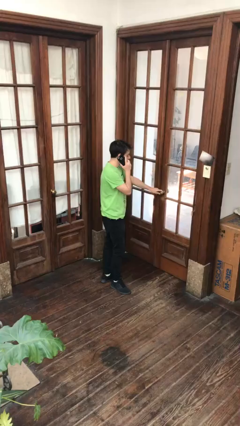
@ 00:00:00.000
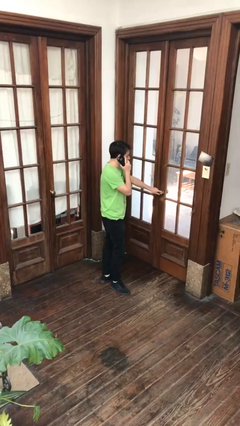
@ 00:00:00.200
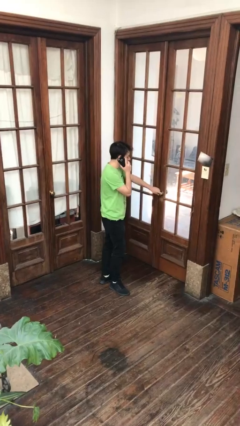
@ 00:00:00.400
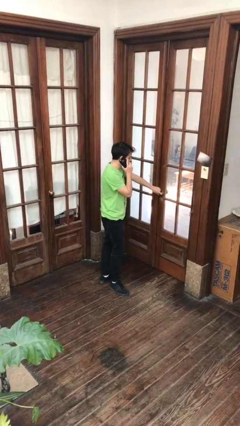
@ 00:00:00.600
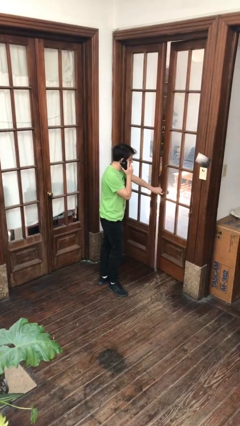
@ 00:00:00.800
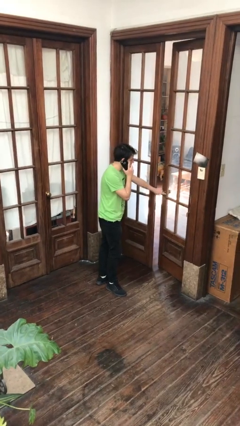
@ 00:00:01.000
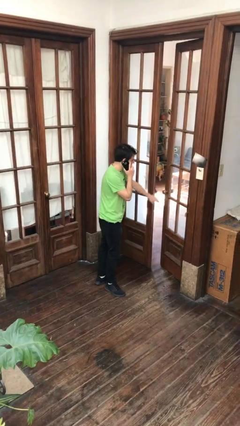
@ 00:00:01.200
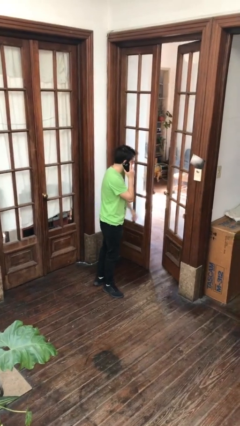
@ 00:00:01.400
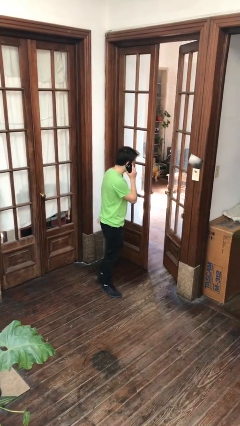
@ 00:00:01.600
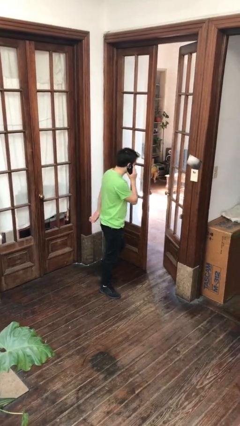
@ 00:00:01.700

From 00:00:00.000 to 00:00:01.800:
person opens facility door

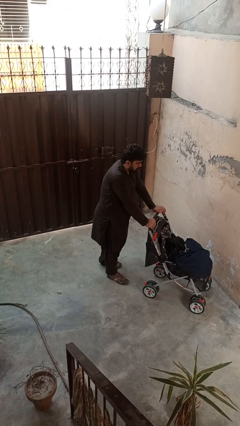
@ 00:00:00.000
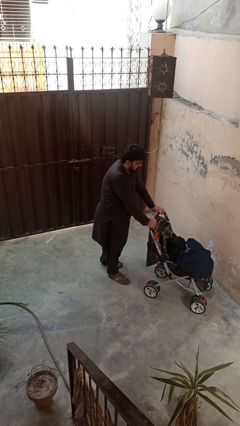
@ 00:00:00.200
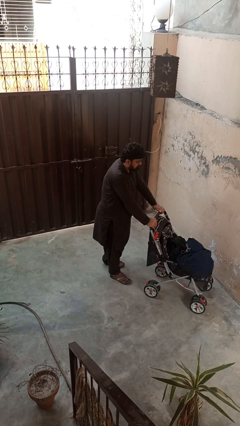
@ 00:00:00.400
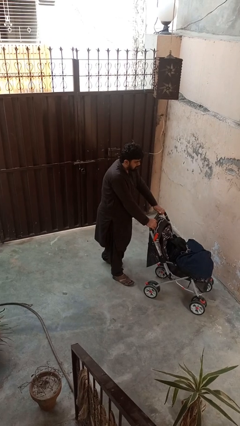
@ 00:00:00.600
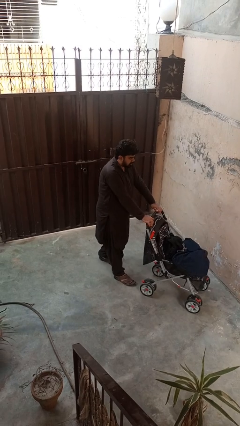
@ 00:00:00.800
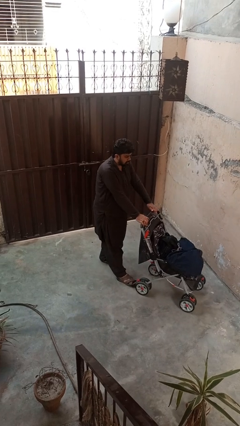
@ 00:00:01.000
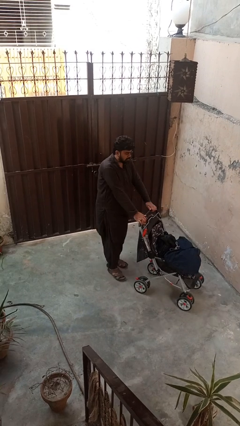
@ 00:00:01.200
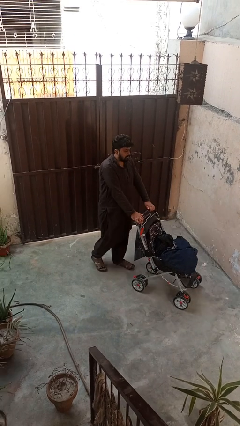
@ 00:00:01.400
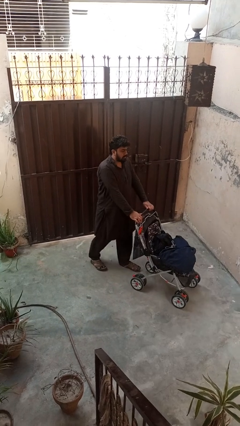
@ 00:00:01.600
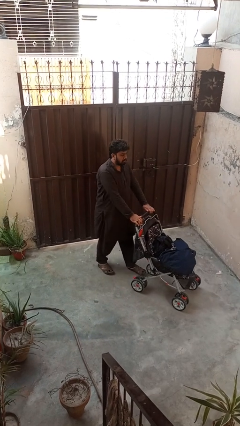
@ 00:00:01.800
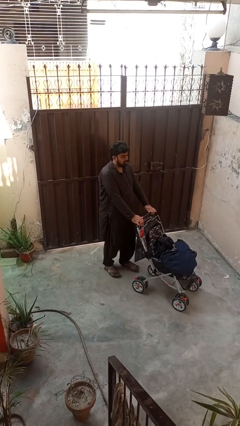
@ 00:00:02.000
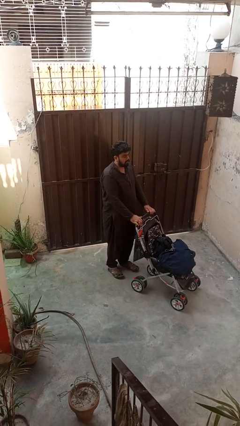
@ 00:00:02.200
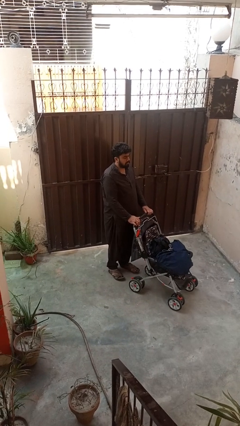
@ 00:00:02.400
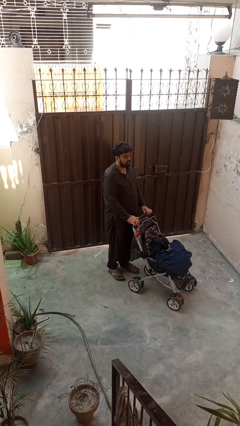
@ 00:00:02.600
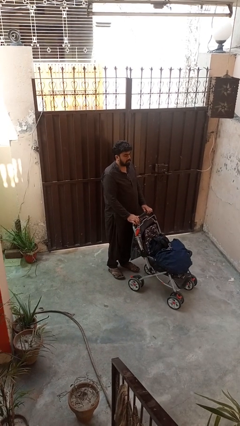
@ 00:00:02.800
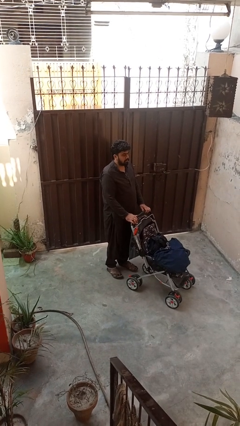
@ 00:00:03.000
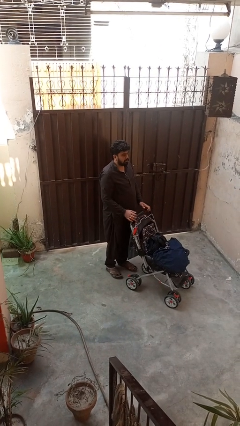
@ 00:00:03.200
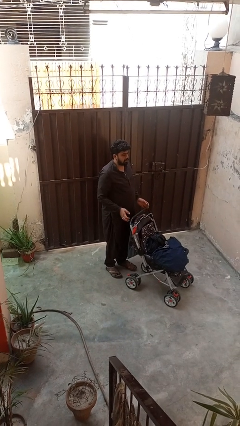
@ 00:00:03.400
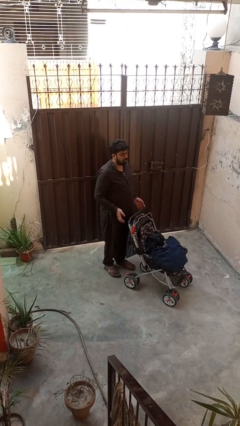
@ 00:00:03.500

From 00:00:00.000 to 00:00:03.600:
person pulls wheeled cart

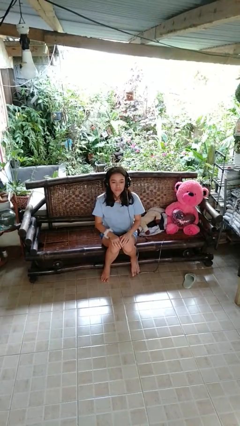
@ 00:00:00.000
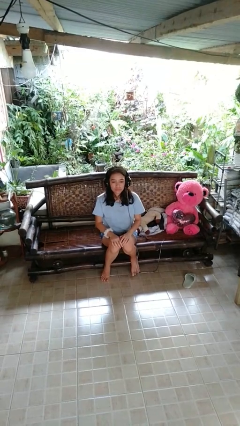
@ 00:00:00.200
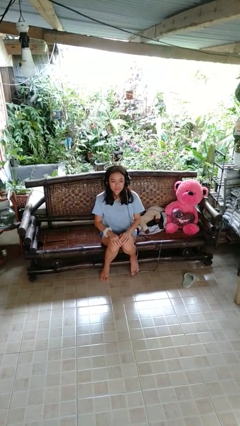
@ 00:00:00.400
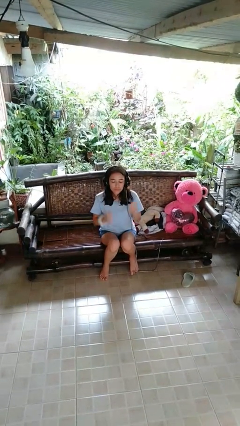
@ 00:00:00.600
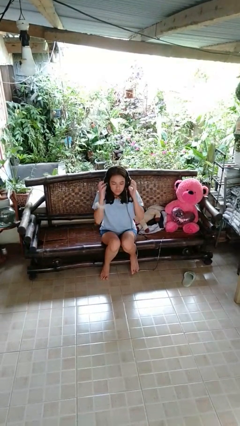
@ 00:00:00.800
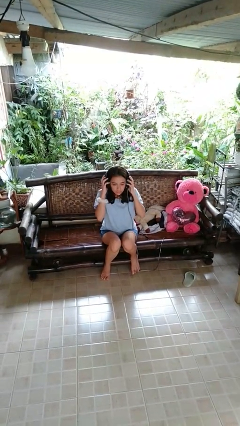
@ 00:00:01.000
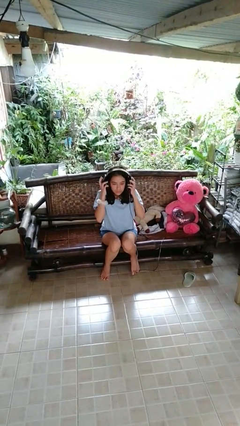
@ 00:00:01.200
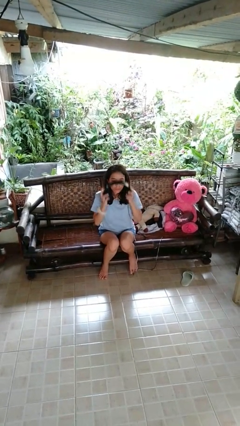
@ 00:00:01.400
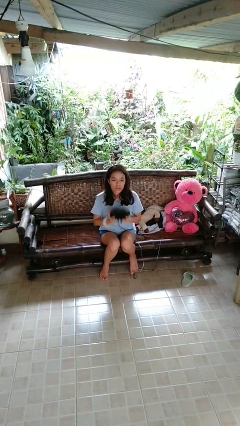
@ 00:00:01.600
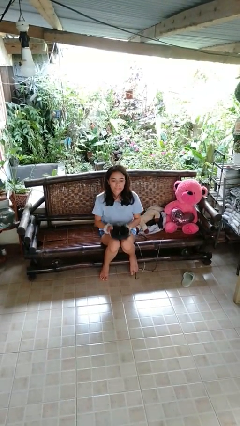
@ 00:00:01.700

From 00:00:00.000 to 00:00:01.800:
person takes off headphones

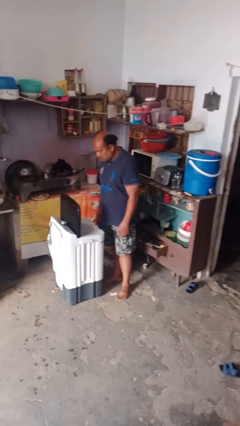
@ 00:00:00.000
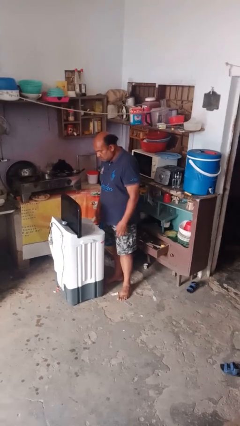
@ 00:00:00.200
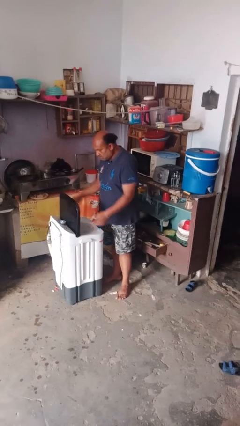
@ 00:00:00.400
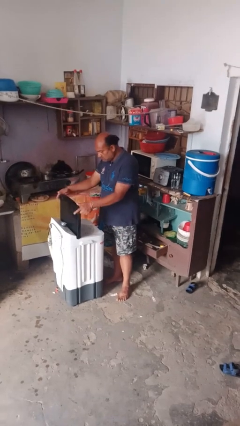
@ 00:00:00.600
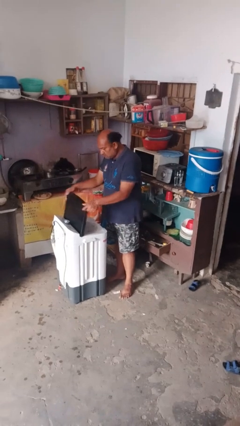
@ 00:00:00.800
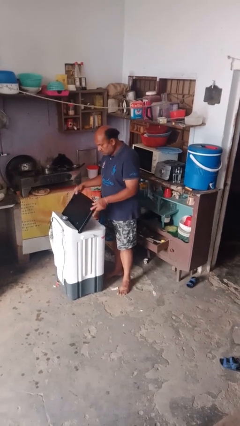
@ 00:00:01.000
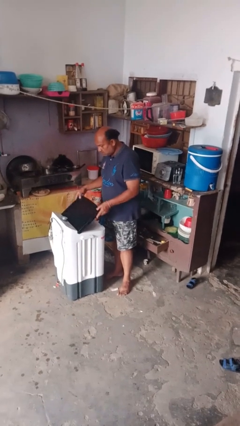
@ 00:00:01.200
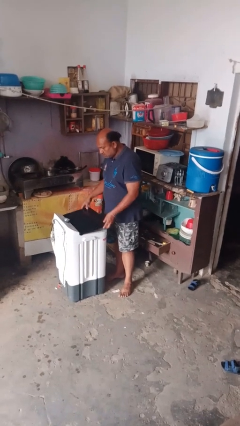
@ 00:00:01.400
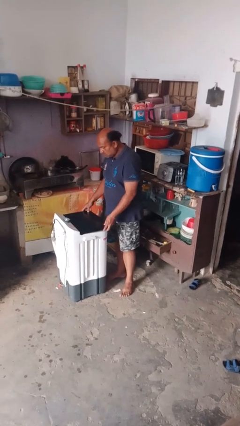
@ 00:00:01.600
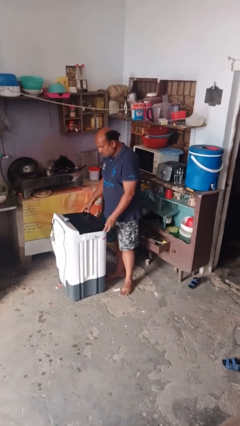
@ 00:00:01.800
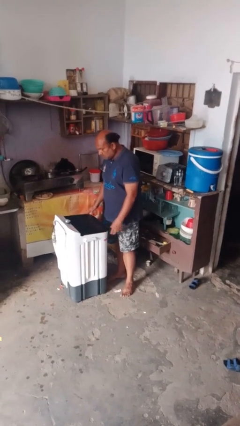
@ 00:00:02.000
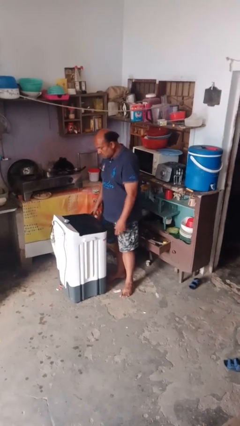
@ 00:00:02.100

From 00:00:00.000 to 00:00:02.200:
person closes clothes washer

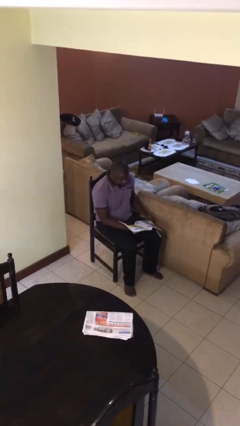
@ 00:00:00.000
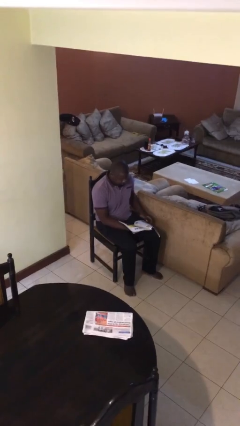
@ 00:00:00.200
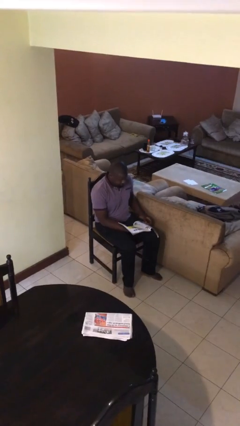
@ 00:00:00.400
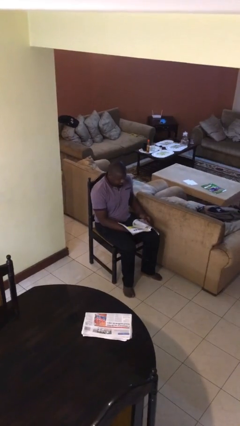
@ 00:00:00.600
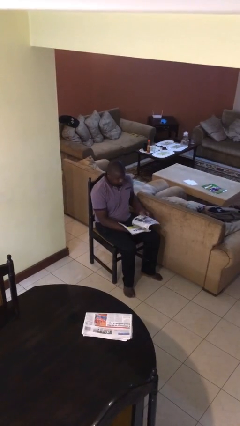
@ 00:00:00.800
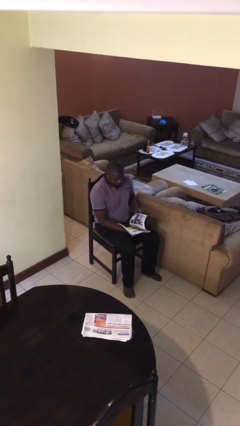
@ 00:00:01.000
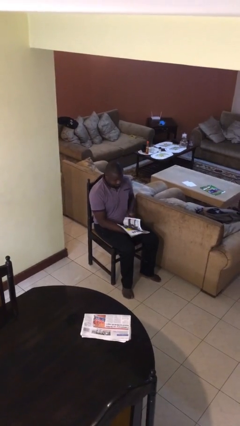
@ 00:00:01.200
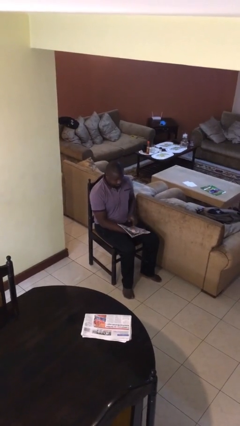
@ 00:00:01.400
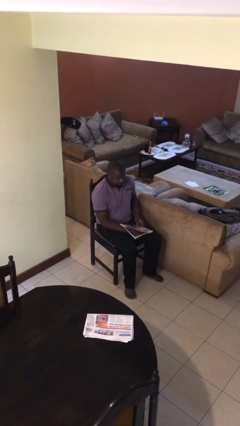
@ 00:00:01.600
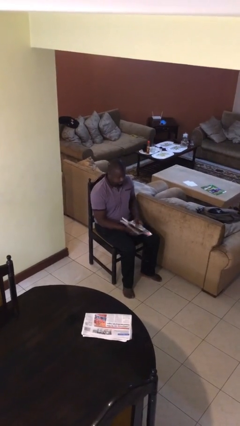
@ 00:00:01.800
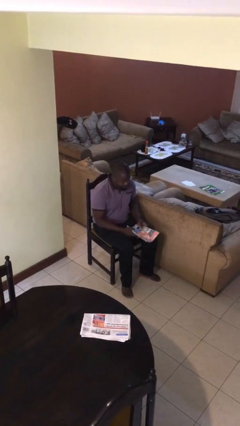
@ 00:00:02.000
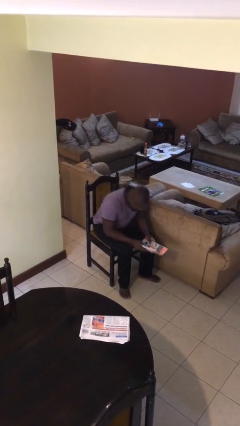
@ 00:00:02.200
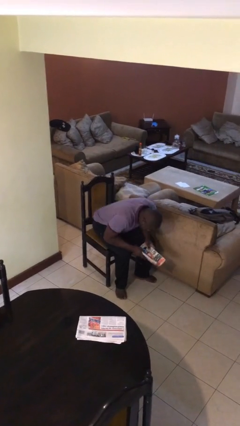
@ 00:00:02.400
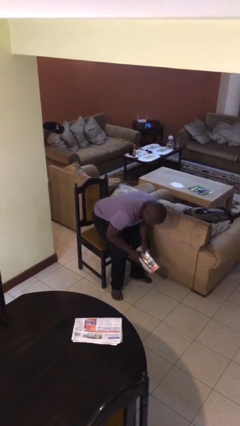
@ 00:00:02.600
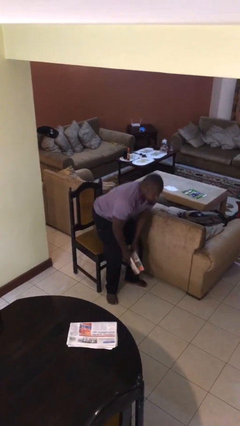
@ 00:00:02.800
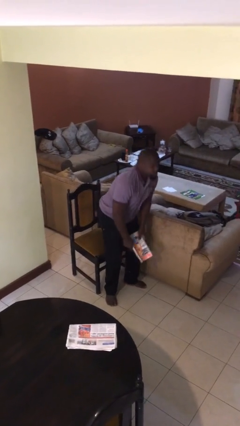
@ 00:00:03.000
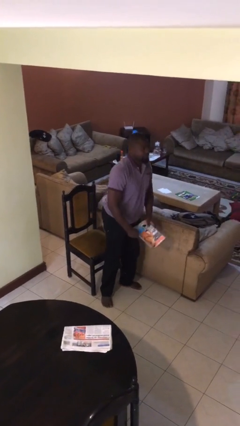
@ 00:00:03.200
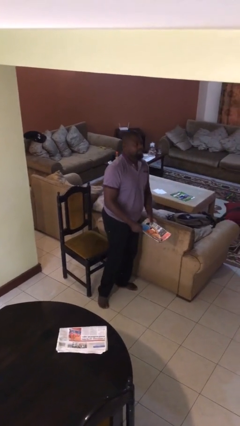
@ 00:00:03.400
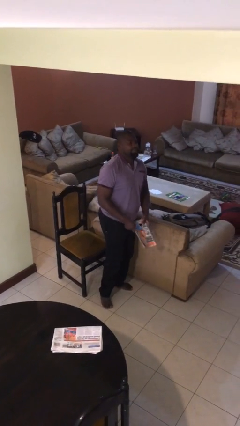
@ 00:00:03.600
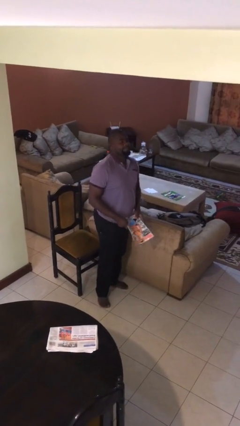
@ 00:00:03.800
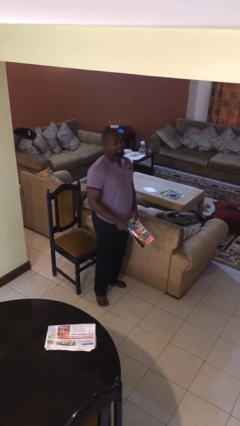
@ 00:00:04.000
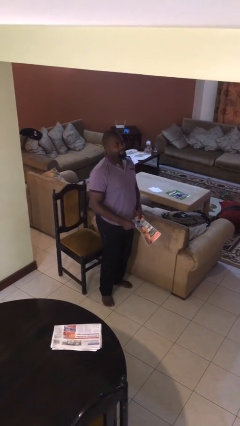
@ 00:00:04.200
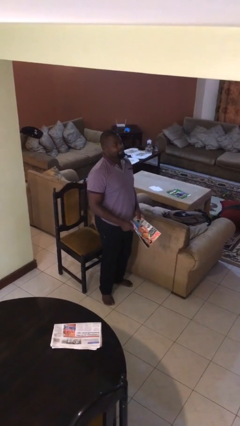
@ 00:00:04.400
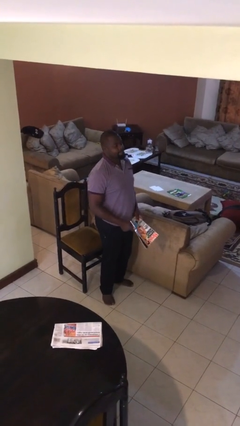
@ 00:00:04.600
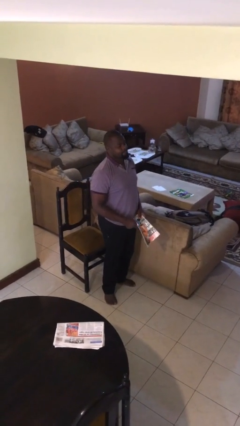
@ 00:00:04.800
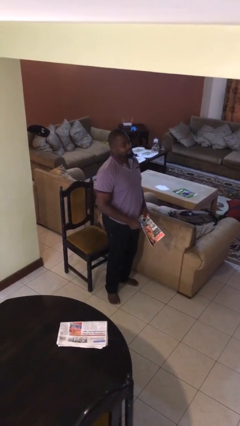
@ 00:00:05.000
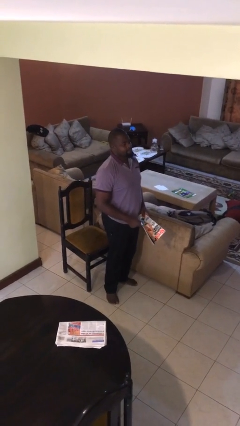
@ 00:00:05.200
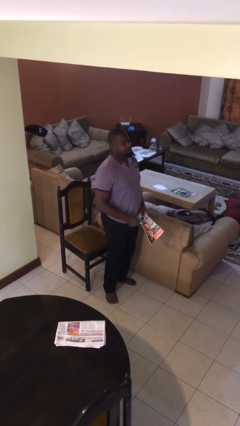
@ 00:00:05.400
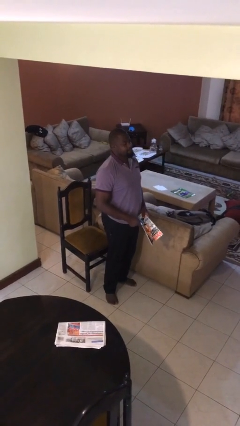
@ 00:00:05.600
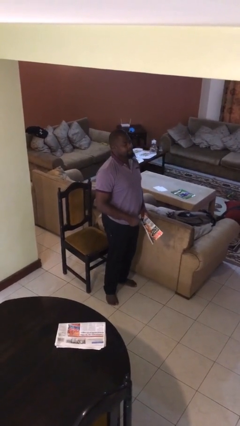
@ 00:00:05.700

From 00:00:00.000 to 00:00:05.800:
person stands up

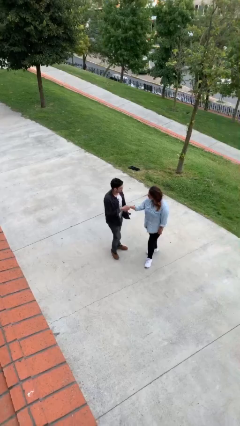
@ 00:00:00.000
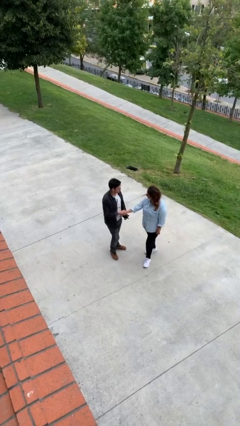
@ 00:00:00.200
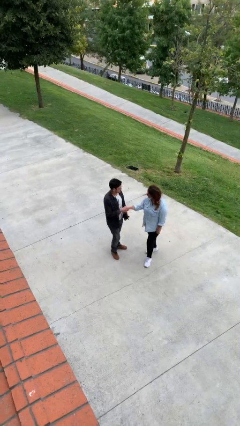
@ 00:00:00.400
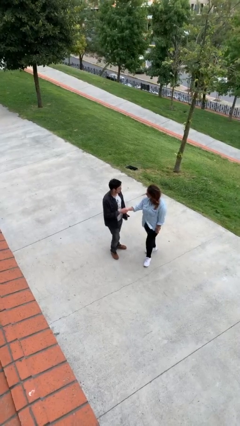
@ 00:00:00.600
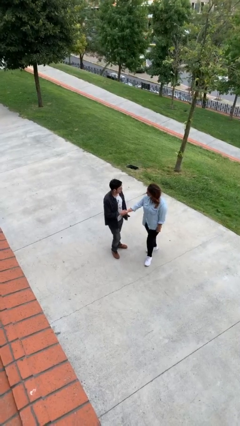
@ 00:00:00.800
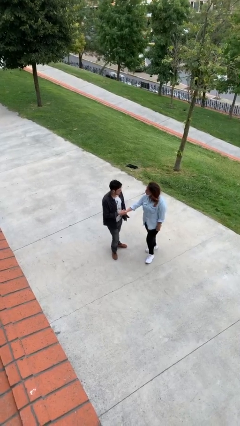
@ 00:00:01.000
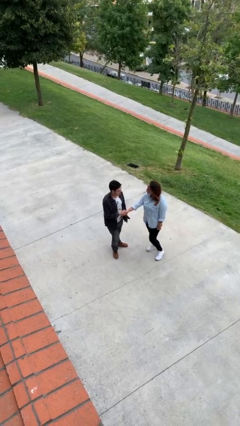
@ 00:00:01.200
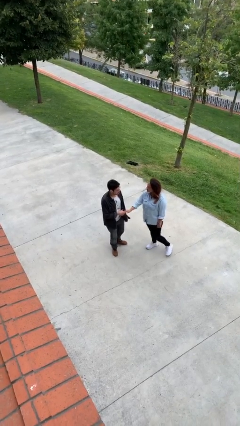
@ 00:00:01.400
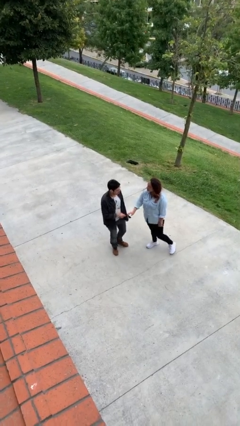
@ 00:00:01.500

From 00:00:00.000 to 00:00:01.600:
person shakes hand

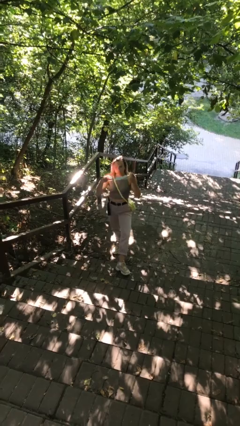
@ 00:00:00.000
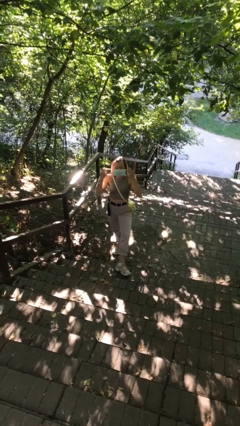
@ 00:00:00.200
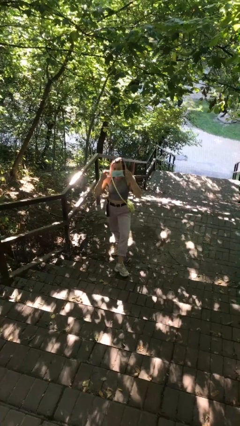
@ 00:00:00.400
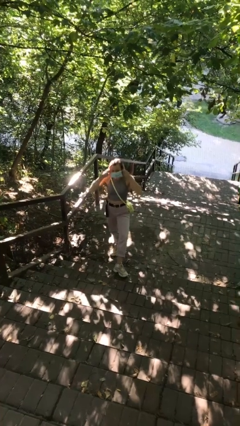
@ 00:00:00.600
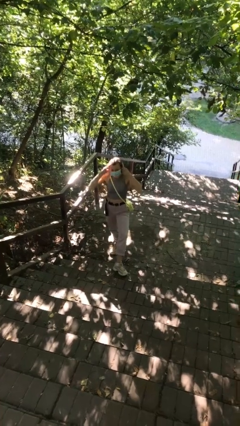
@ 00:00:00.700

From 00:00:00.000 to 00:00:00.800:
person puts on facemask
